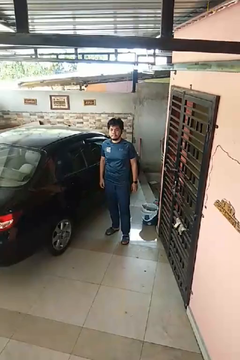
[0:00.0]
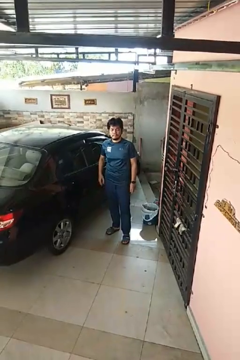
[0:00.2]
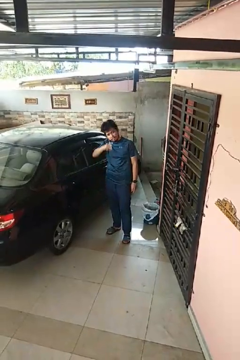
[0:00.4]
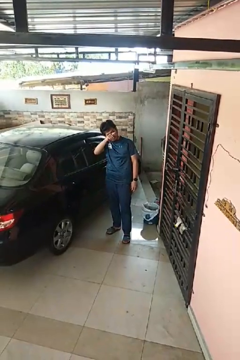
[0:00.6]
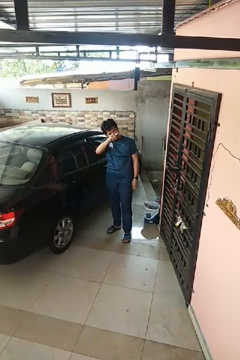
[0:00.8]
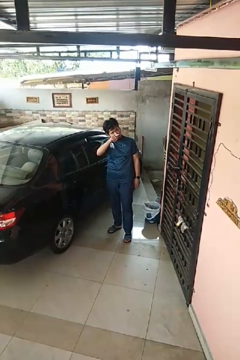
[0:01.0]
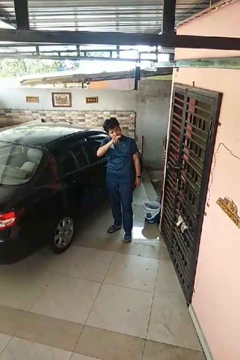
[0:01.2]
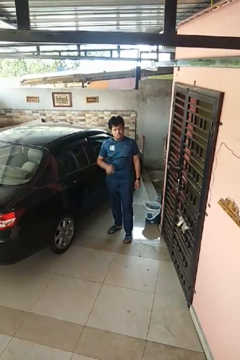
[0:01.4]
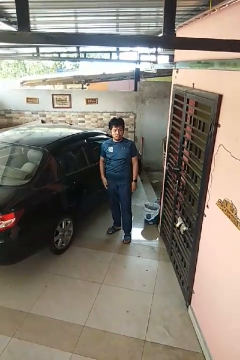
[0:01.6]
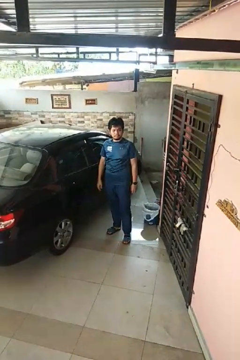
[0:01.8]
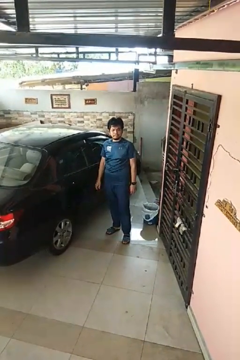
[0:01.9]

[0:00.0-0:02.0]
person points at person

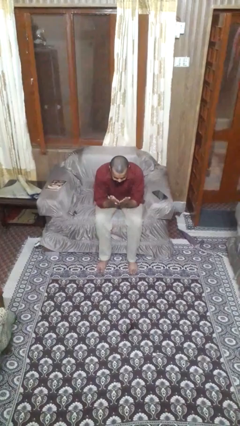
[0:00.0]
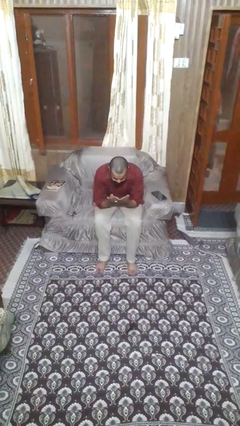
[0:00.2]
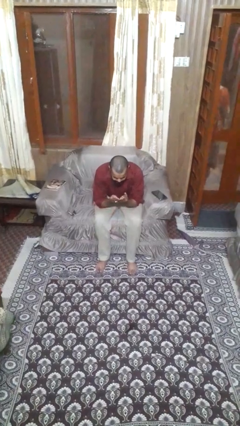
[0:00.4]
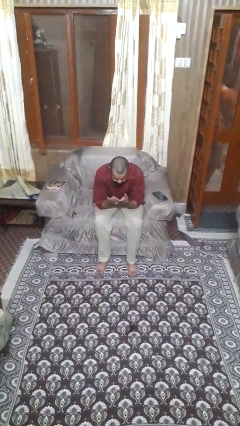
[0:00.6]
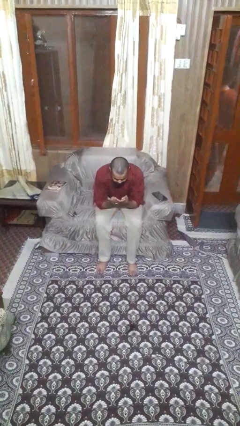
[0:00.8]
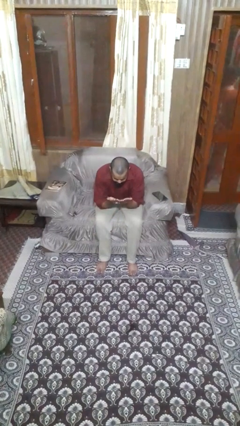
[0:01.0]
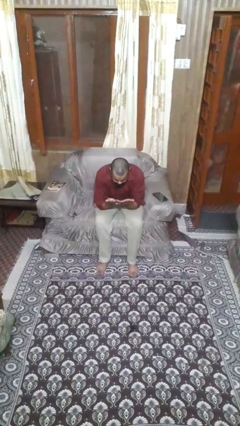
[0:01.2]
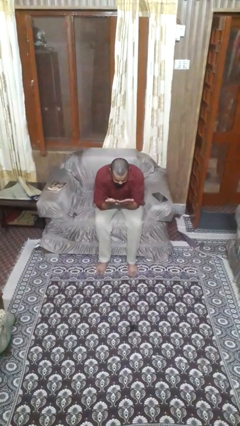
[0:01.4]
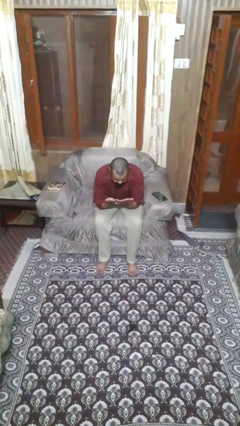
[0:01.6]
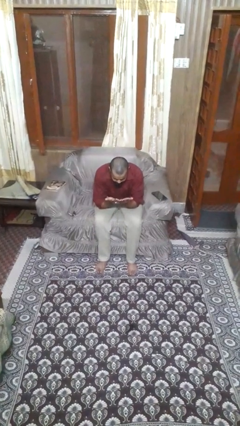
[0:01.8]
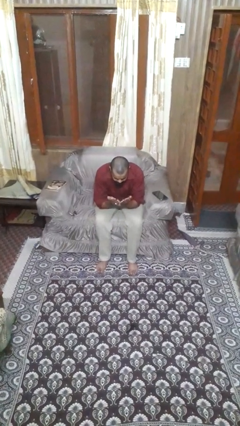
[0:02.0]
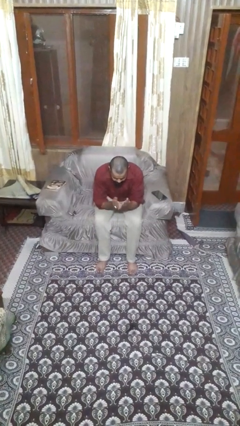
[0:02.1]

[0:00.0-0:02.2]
person looks at hands in lap

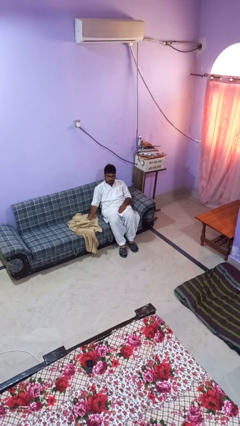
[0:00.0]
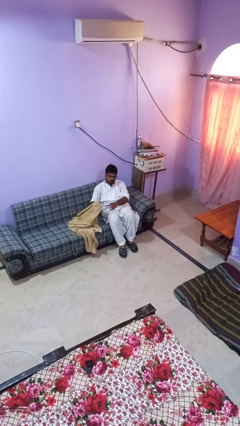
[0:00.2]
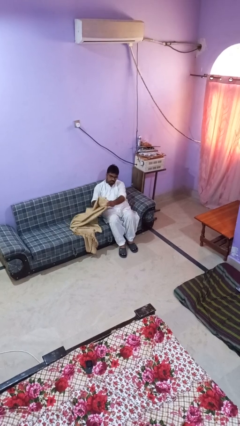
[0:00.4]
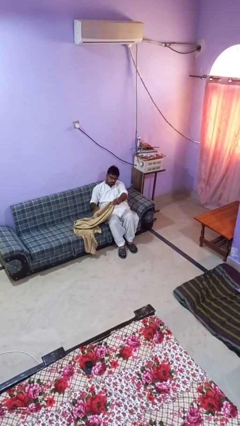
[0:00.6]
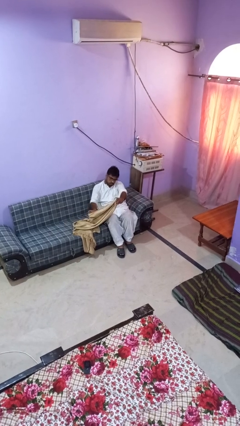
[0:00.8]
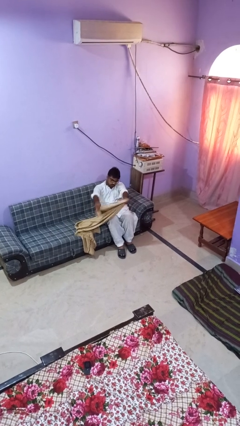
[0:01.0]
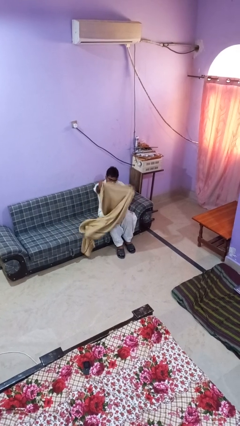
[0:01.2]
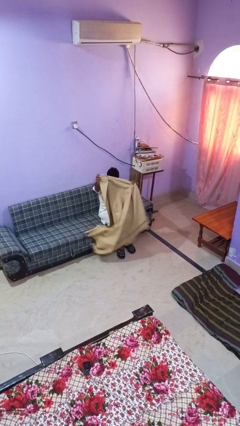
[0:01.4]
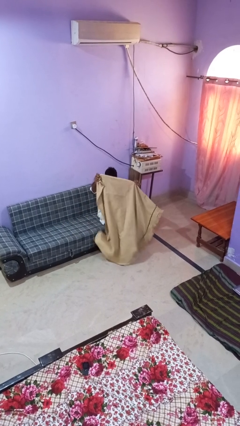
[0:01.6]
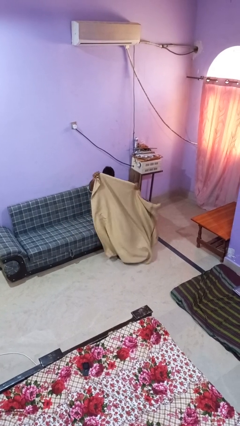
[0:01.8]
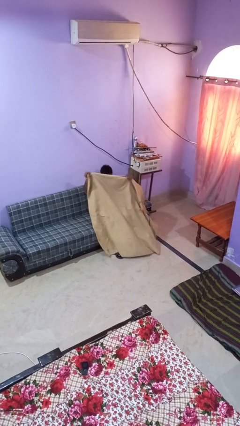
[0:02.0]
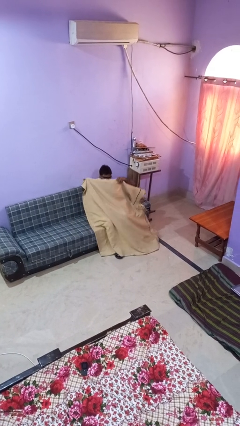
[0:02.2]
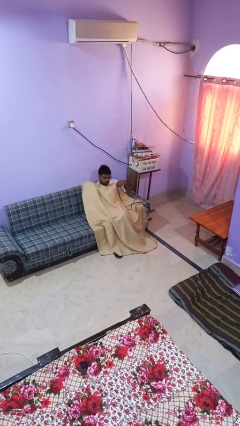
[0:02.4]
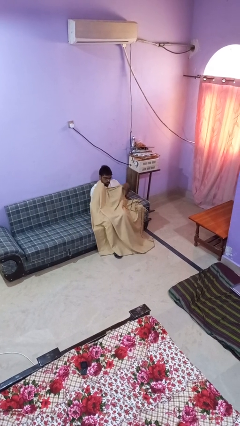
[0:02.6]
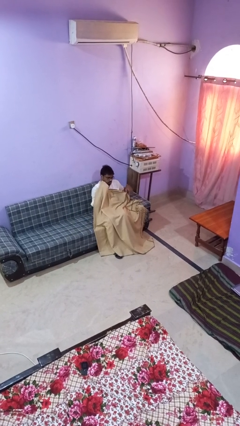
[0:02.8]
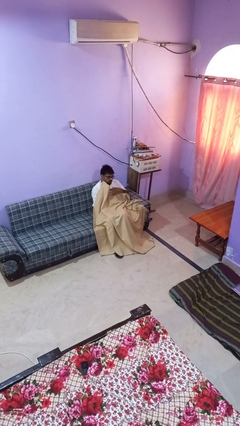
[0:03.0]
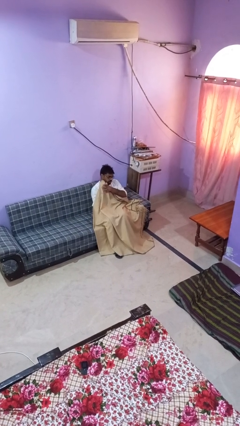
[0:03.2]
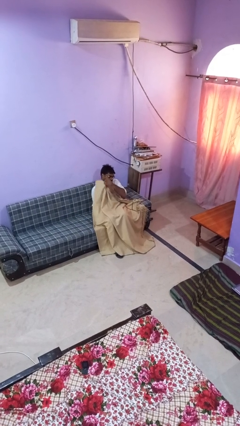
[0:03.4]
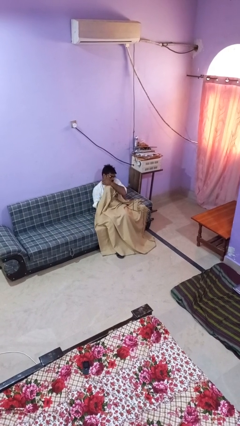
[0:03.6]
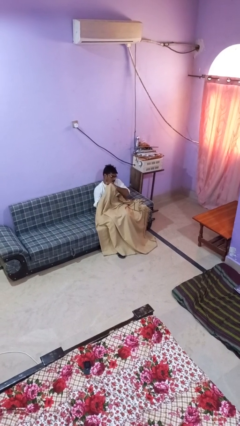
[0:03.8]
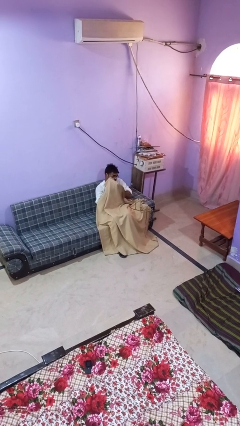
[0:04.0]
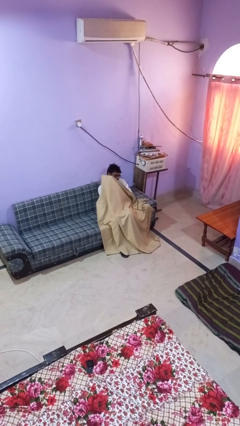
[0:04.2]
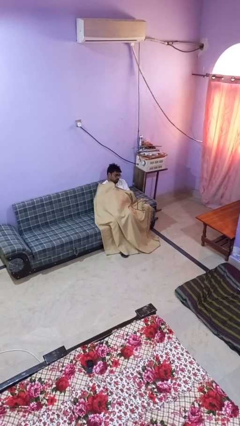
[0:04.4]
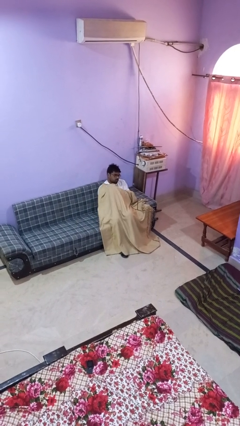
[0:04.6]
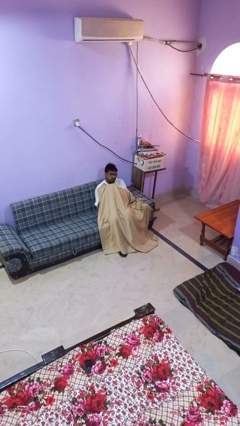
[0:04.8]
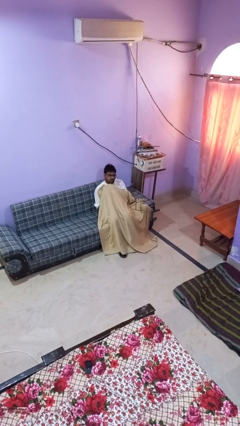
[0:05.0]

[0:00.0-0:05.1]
person covers with blanket

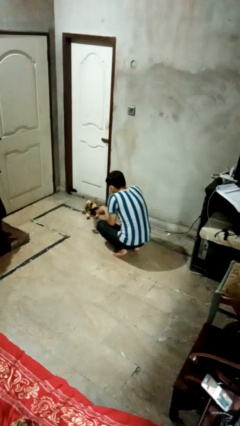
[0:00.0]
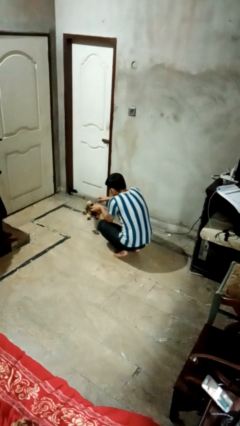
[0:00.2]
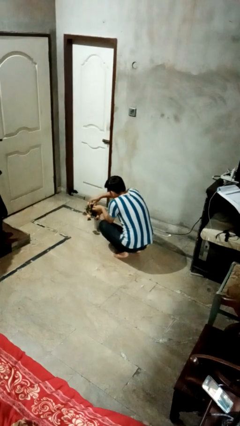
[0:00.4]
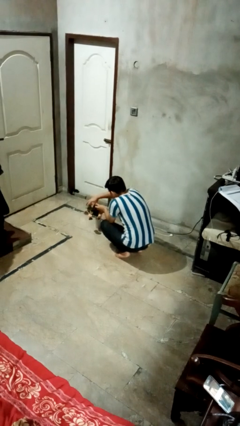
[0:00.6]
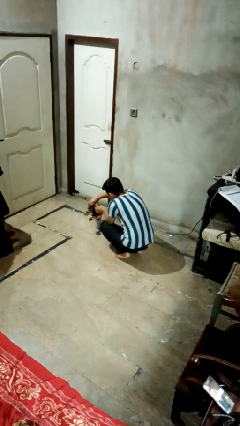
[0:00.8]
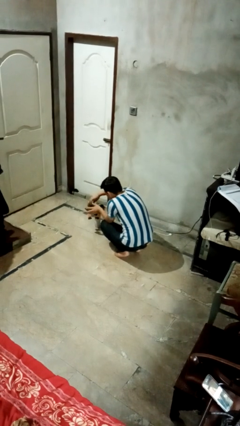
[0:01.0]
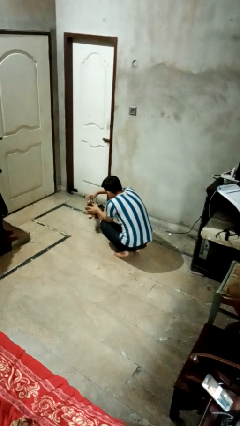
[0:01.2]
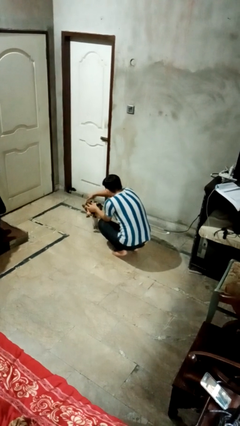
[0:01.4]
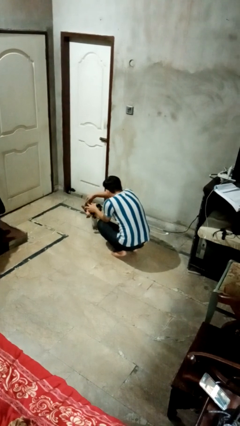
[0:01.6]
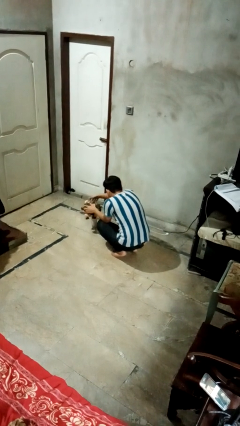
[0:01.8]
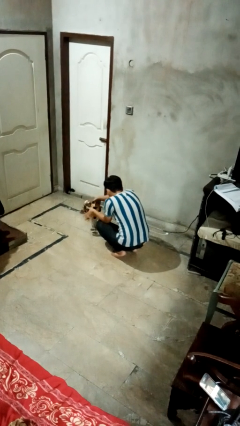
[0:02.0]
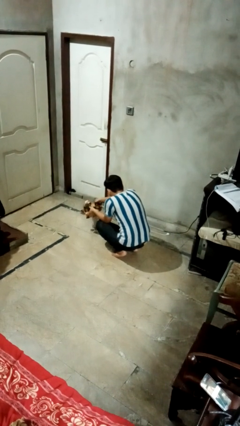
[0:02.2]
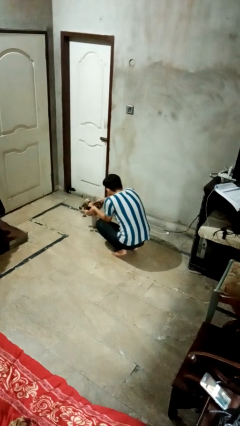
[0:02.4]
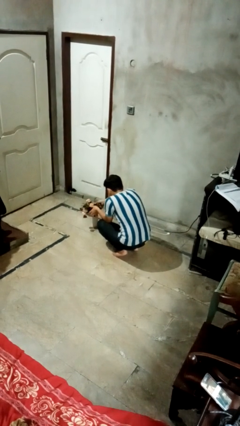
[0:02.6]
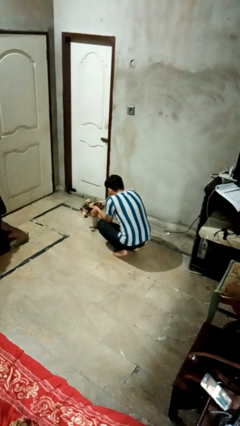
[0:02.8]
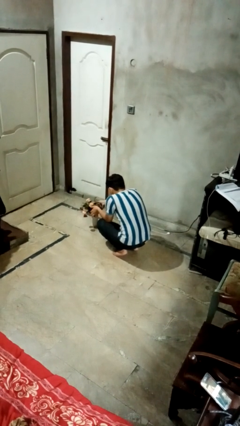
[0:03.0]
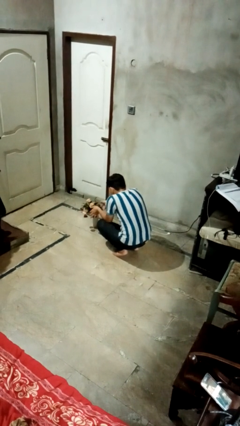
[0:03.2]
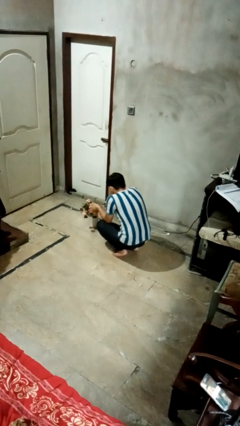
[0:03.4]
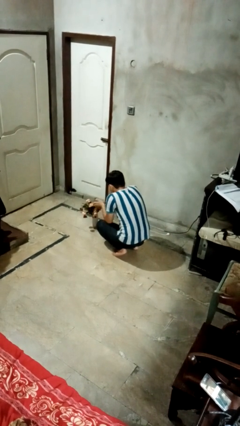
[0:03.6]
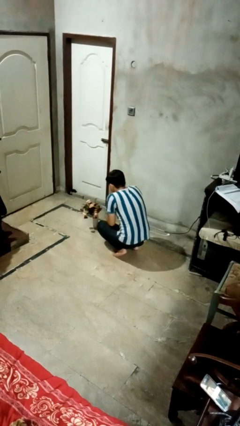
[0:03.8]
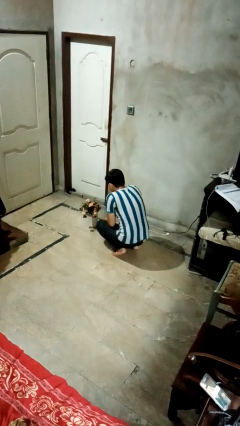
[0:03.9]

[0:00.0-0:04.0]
person arranges flowers in vase

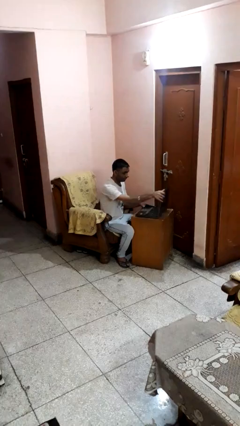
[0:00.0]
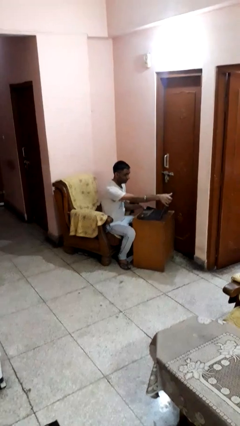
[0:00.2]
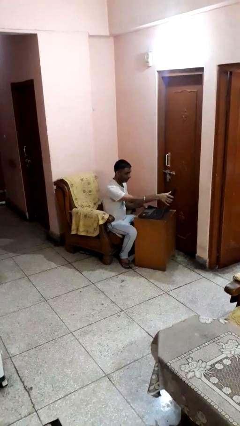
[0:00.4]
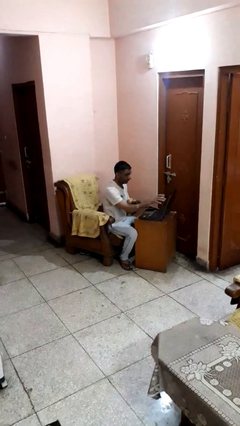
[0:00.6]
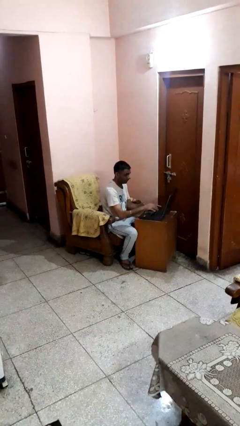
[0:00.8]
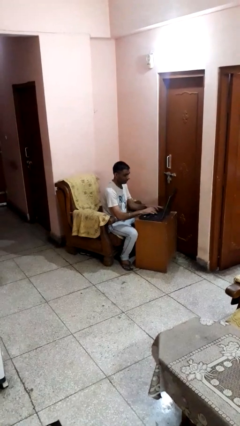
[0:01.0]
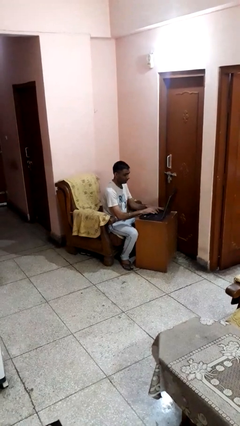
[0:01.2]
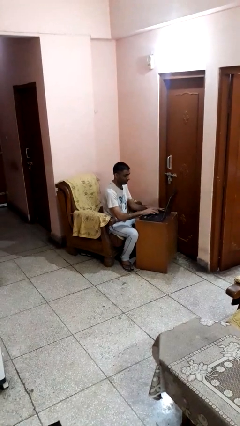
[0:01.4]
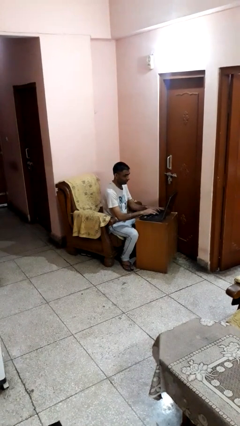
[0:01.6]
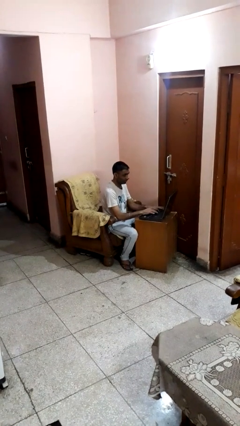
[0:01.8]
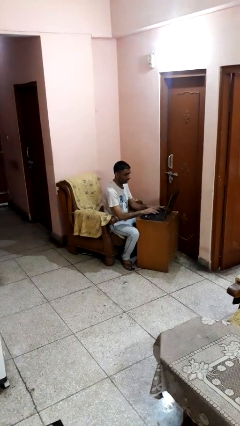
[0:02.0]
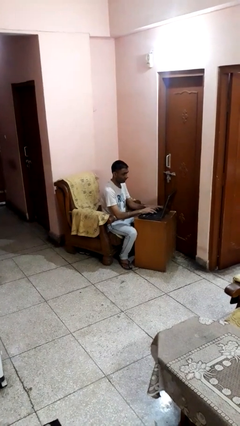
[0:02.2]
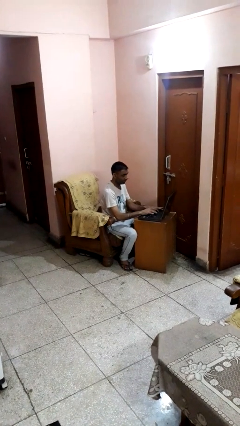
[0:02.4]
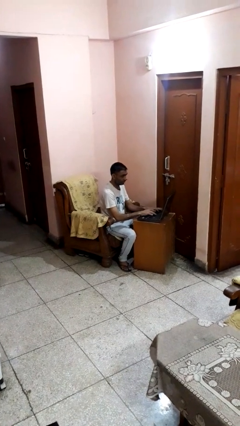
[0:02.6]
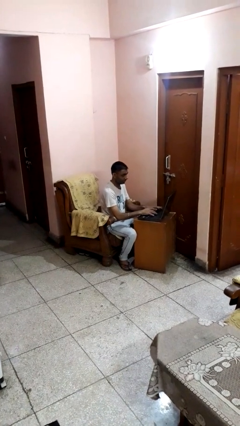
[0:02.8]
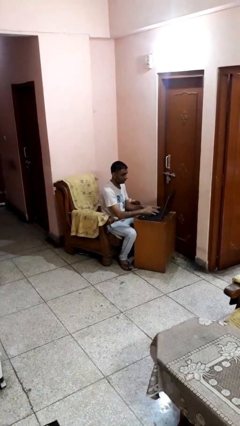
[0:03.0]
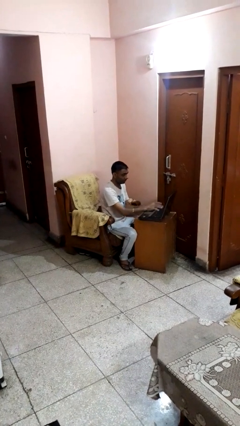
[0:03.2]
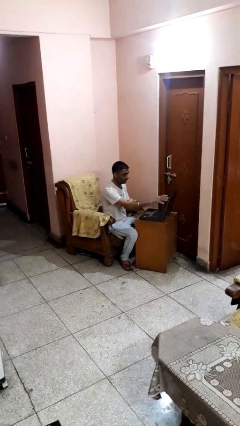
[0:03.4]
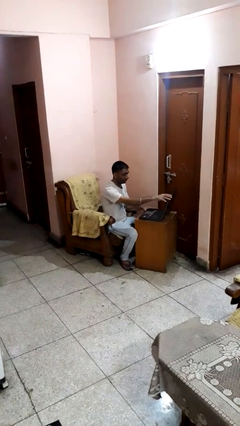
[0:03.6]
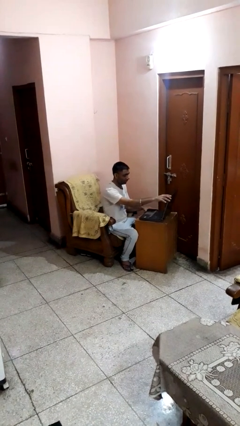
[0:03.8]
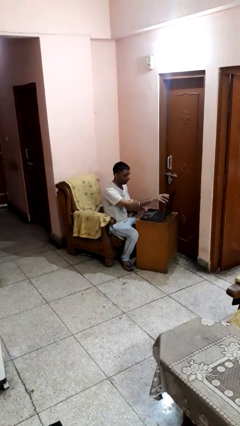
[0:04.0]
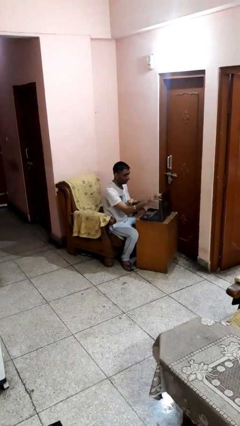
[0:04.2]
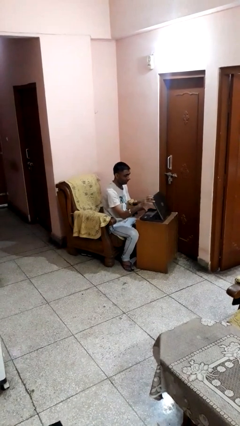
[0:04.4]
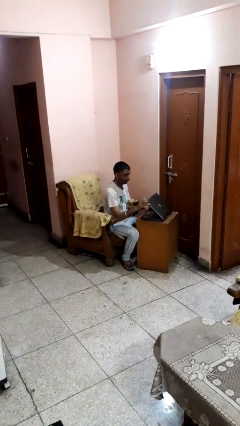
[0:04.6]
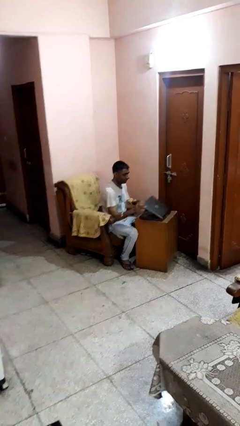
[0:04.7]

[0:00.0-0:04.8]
person interacts with laptop
